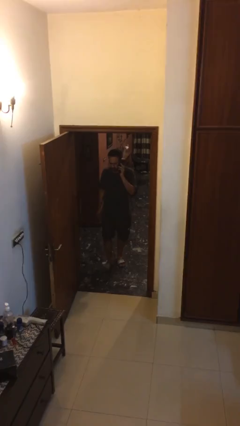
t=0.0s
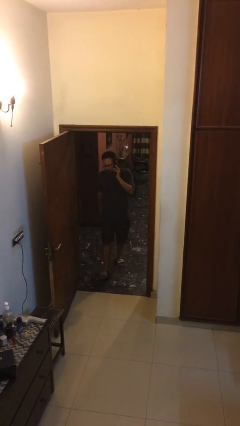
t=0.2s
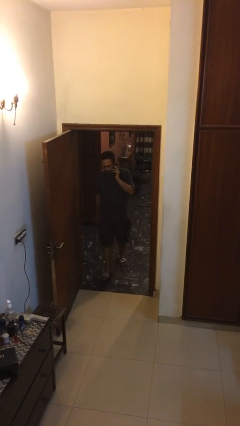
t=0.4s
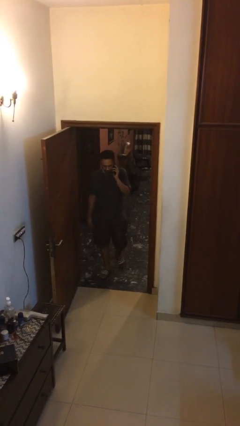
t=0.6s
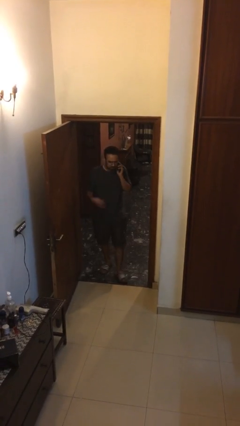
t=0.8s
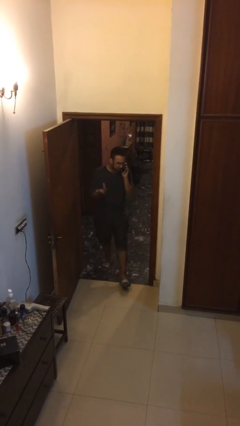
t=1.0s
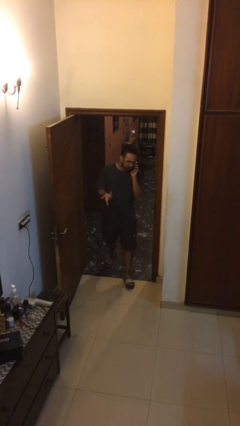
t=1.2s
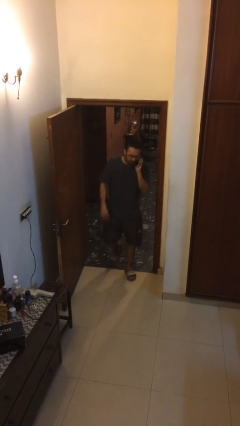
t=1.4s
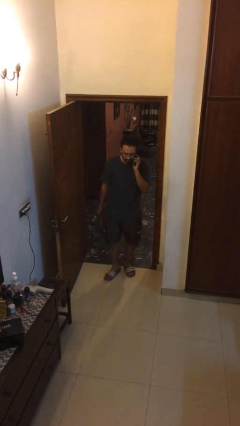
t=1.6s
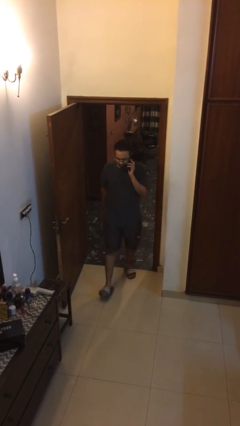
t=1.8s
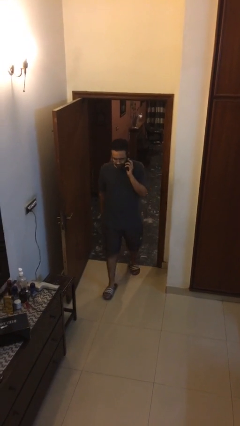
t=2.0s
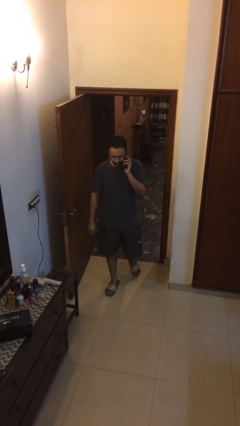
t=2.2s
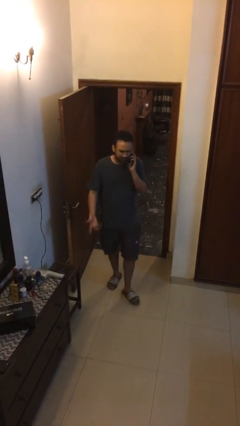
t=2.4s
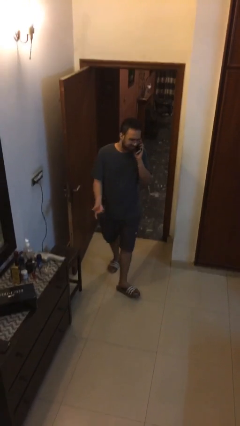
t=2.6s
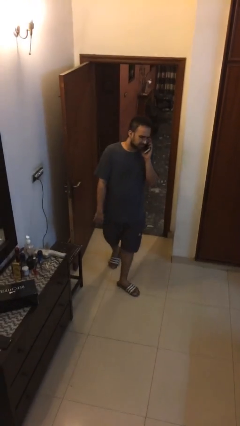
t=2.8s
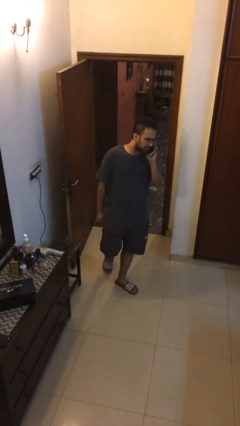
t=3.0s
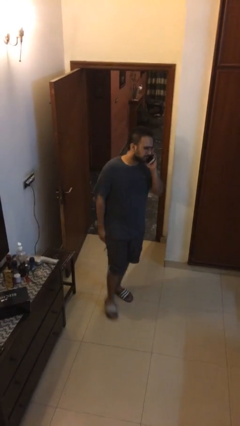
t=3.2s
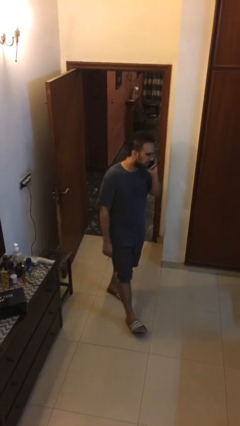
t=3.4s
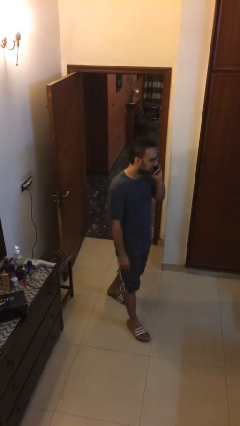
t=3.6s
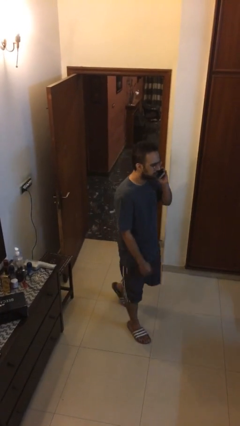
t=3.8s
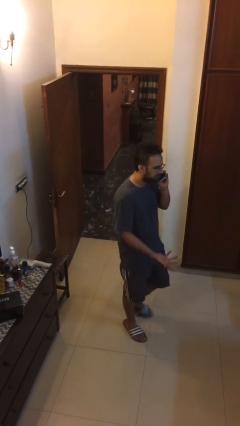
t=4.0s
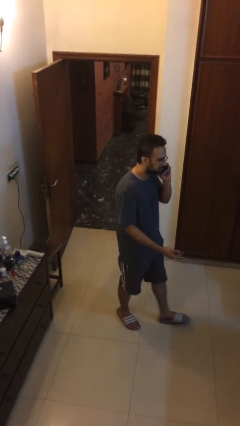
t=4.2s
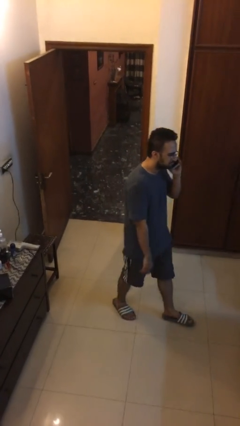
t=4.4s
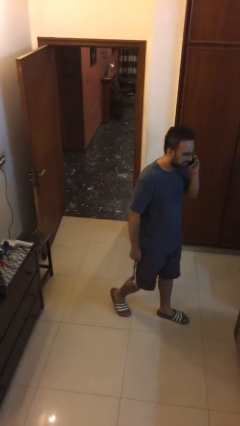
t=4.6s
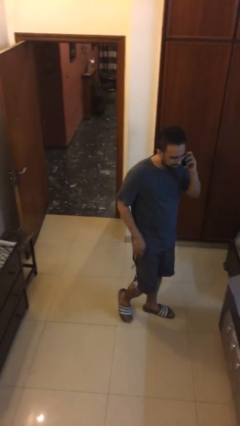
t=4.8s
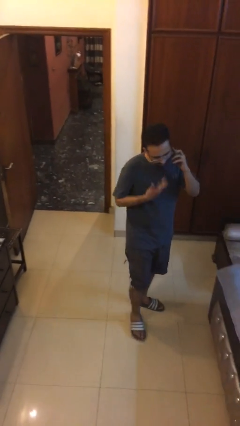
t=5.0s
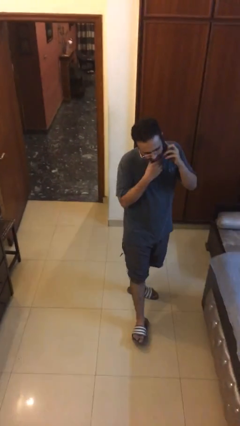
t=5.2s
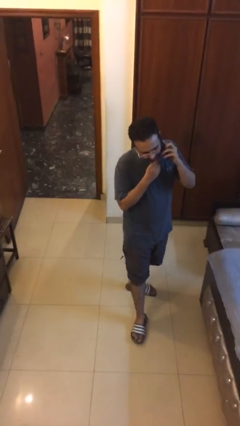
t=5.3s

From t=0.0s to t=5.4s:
person enters scene through structure

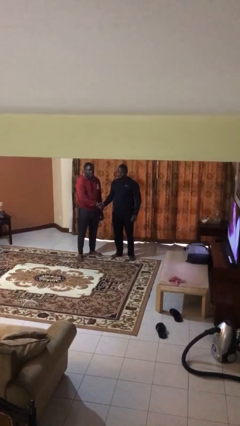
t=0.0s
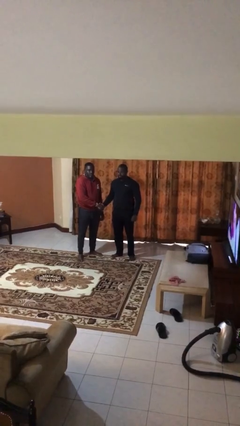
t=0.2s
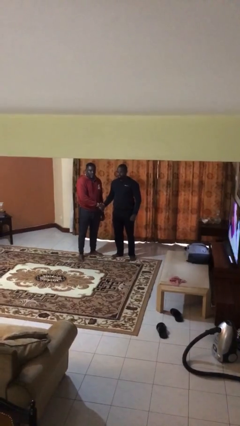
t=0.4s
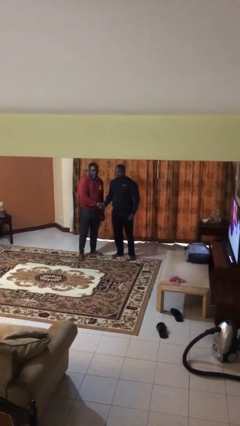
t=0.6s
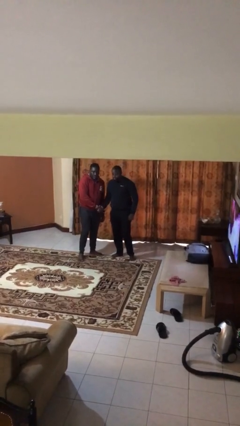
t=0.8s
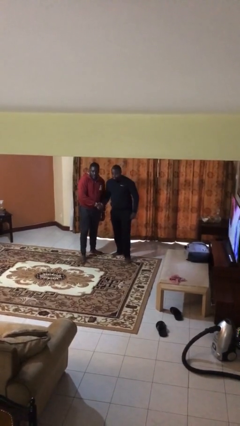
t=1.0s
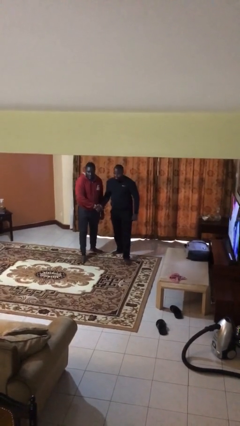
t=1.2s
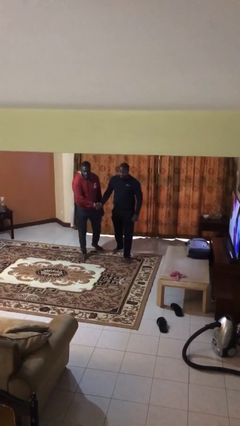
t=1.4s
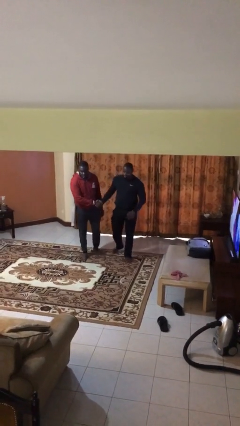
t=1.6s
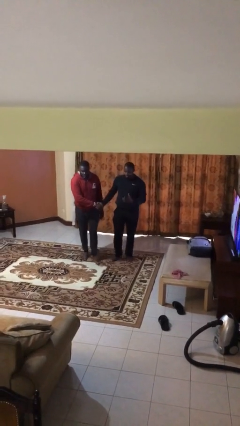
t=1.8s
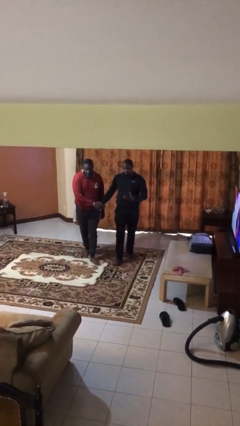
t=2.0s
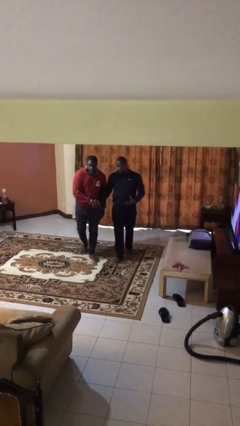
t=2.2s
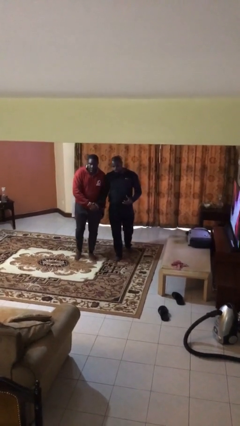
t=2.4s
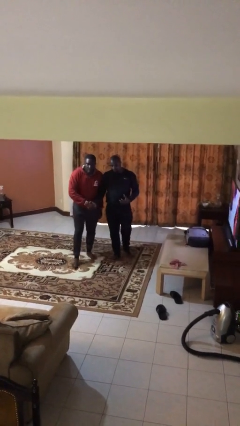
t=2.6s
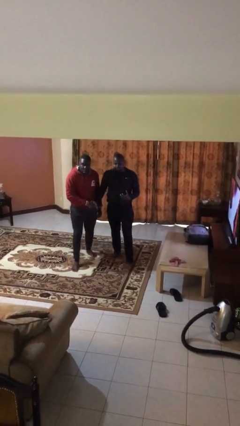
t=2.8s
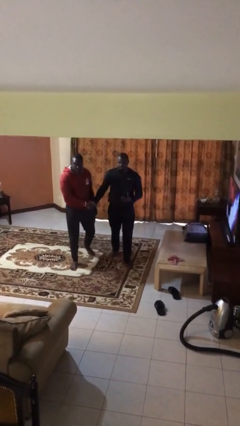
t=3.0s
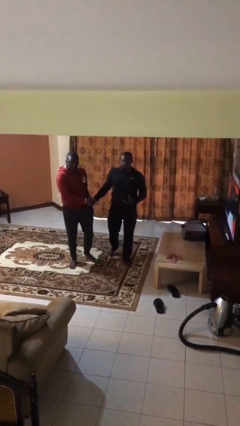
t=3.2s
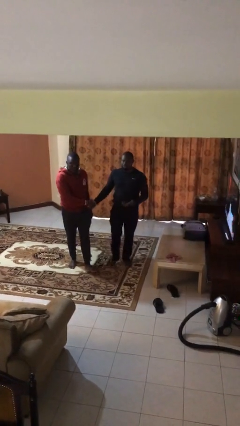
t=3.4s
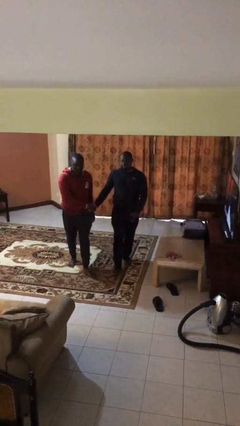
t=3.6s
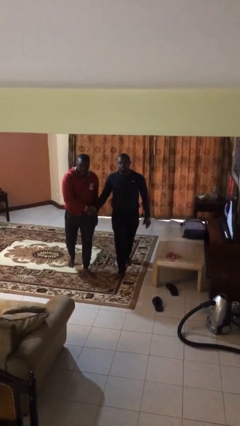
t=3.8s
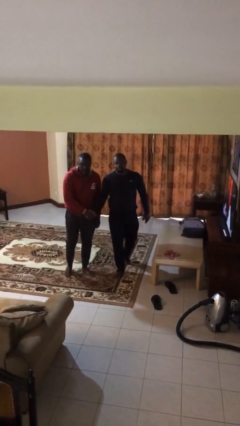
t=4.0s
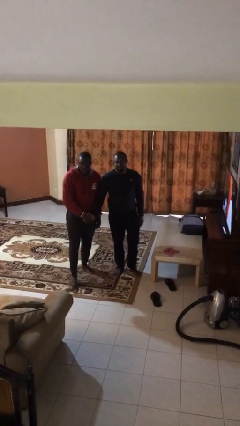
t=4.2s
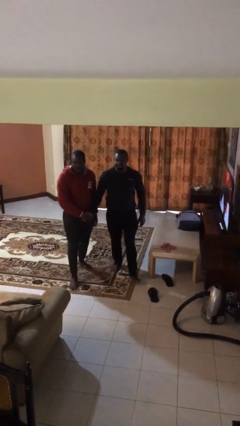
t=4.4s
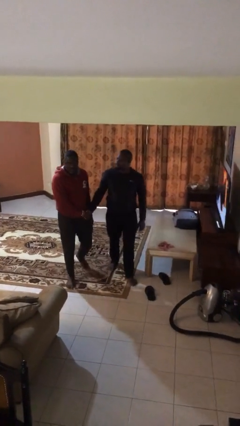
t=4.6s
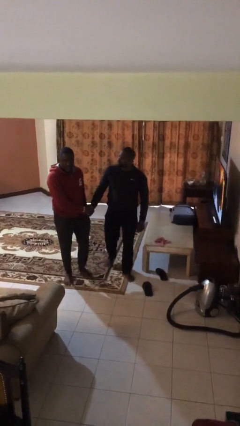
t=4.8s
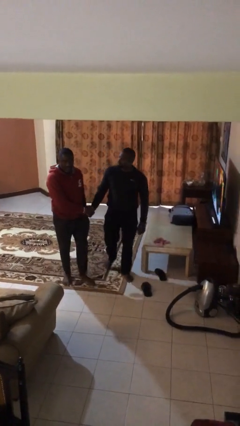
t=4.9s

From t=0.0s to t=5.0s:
person holds hand

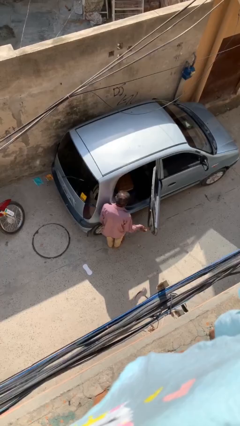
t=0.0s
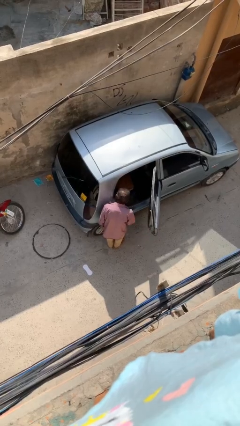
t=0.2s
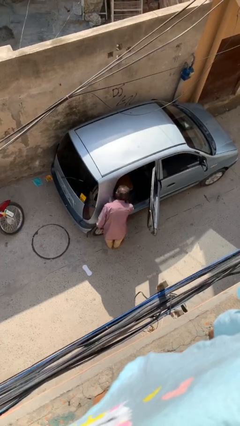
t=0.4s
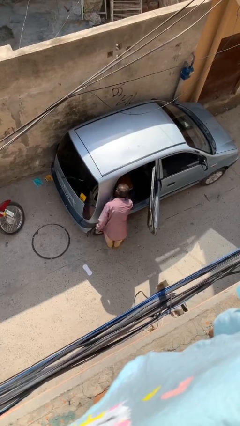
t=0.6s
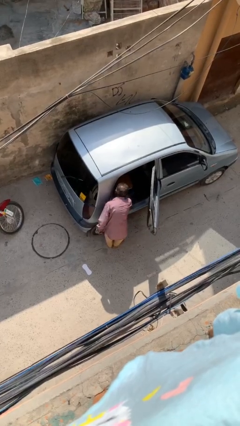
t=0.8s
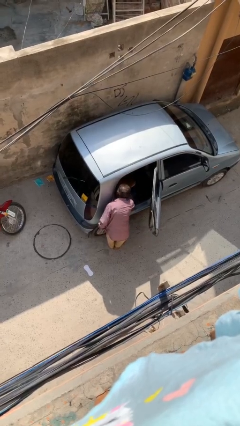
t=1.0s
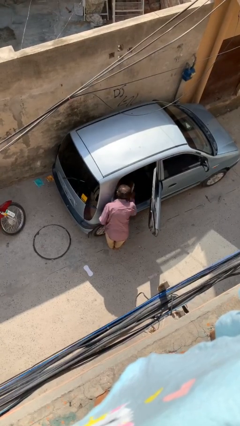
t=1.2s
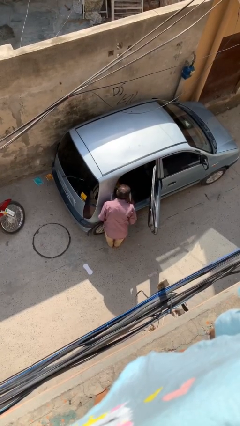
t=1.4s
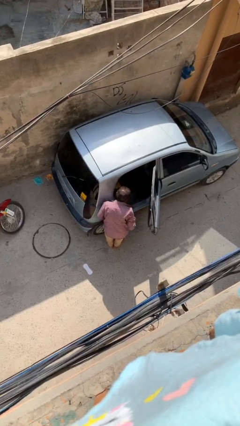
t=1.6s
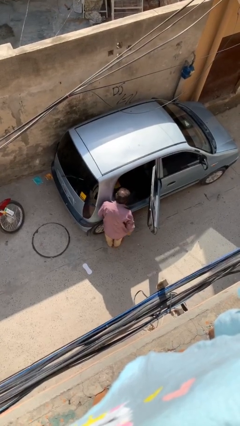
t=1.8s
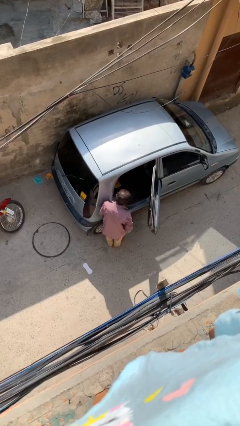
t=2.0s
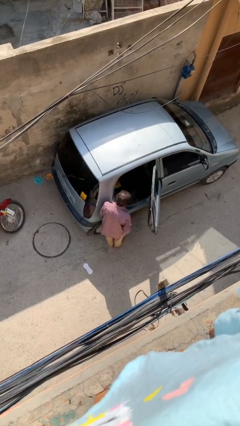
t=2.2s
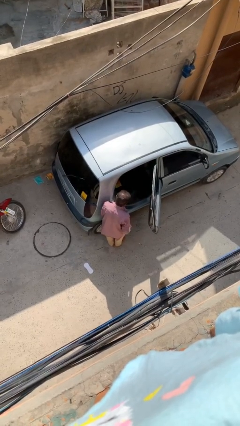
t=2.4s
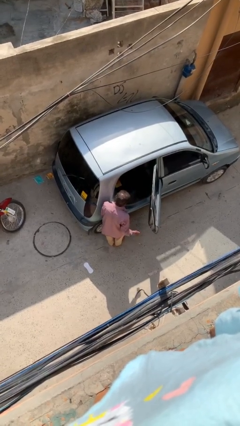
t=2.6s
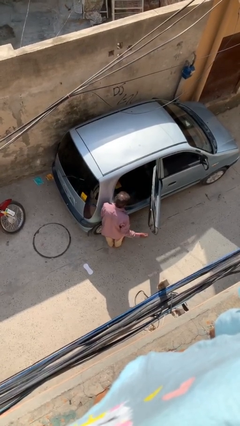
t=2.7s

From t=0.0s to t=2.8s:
person unloads car

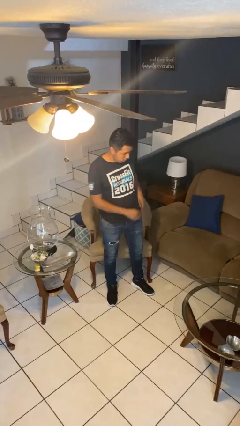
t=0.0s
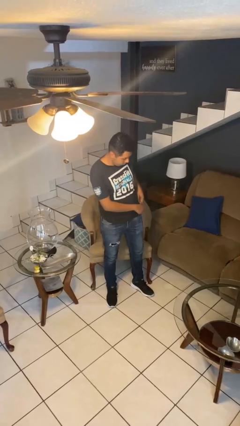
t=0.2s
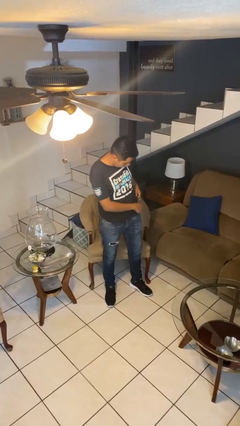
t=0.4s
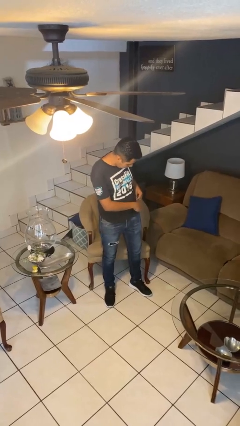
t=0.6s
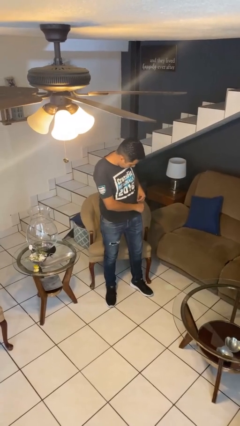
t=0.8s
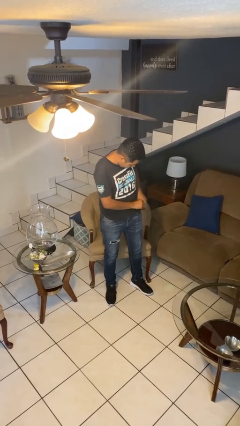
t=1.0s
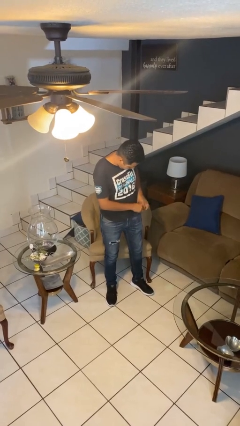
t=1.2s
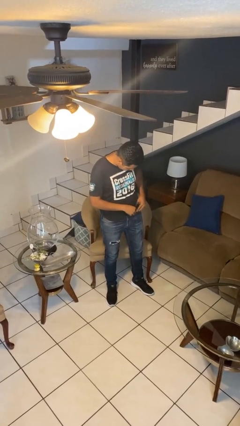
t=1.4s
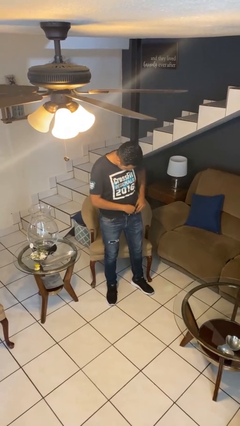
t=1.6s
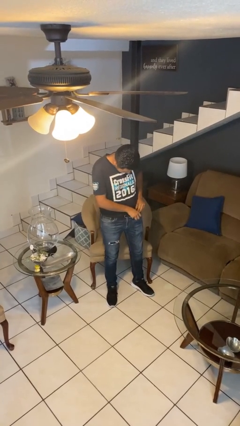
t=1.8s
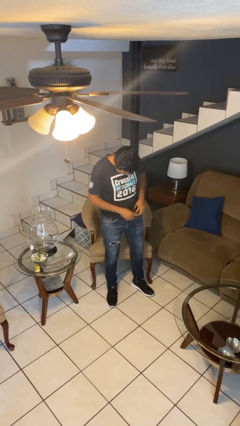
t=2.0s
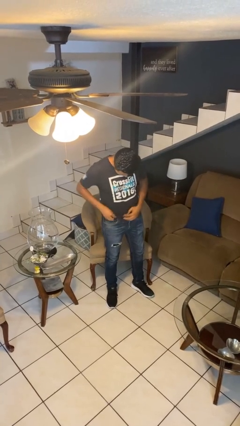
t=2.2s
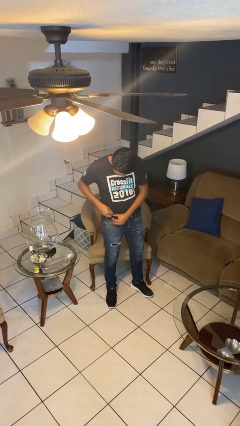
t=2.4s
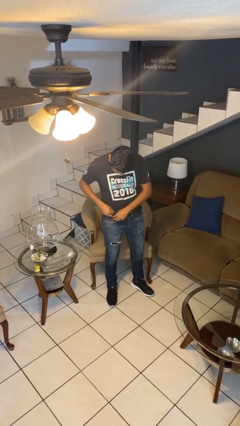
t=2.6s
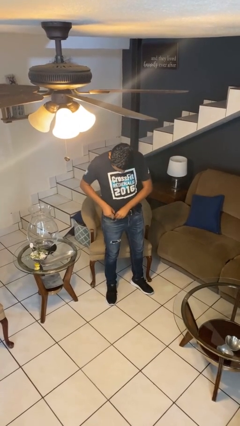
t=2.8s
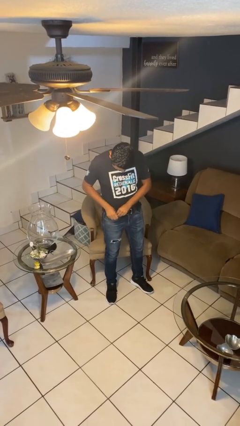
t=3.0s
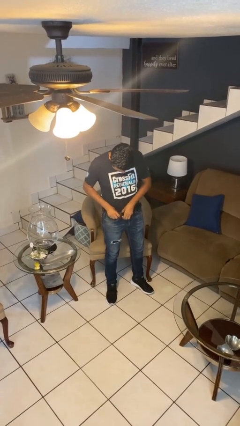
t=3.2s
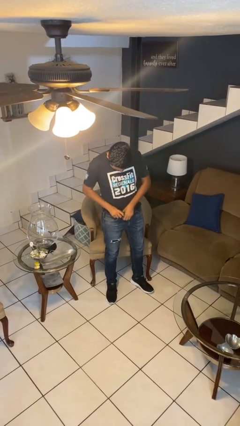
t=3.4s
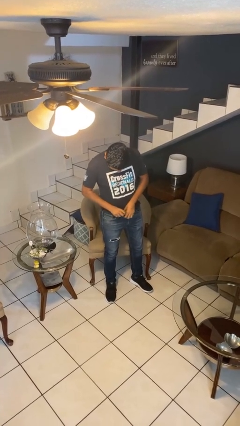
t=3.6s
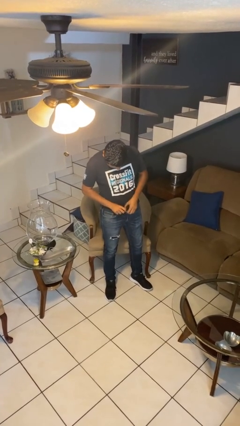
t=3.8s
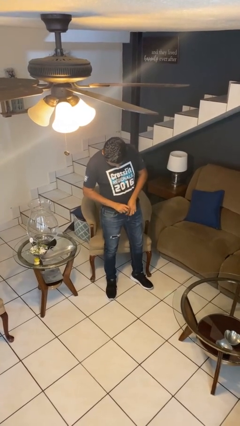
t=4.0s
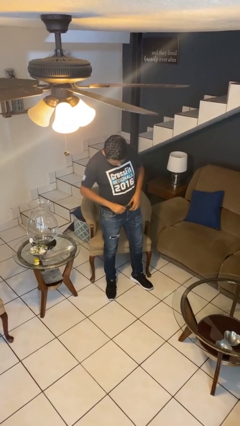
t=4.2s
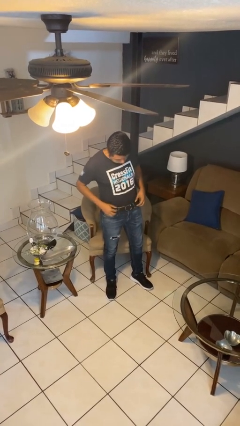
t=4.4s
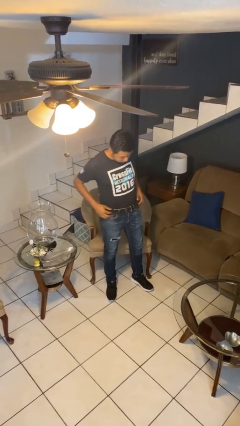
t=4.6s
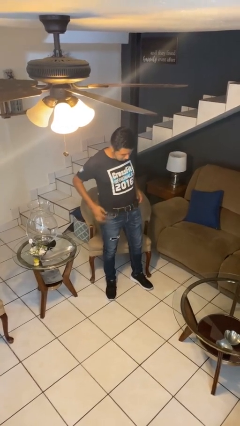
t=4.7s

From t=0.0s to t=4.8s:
person tucks in shirt

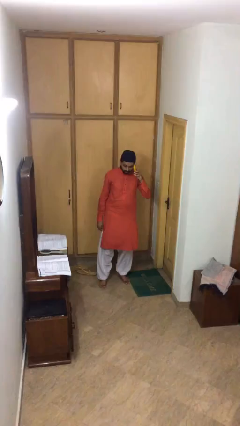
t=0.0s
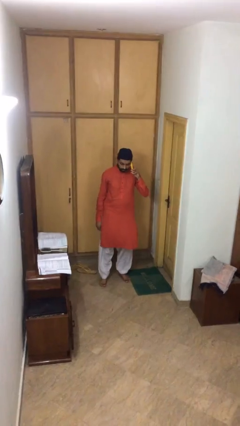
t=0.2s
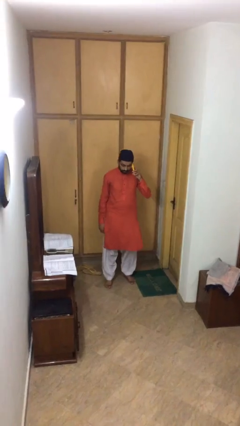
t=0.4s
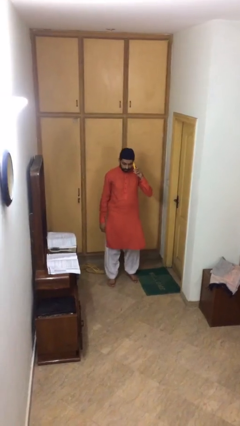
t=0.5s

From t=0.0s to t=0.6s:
person talks on phone
